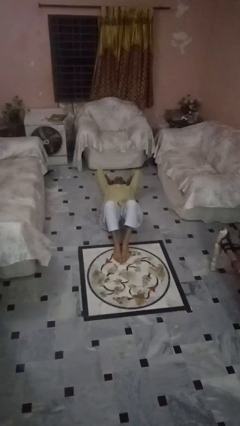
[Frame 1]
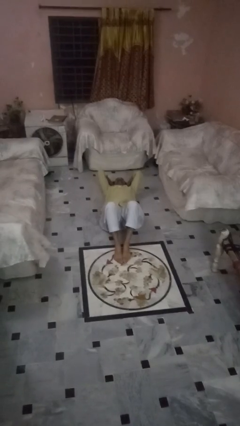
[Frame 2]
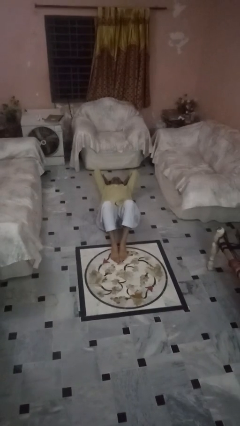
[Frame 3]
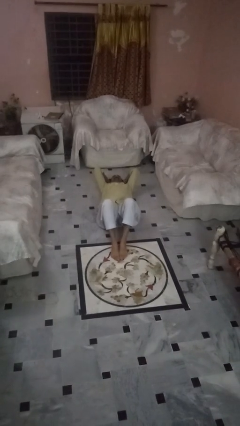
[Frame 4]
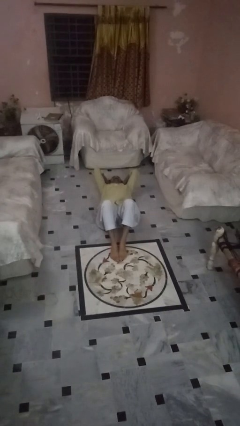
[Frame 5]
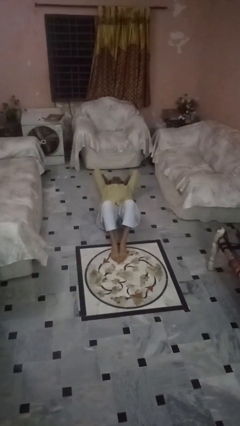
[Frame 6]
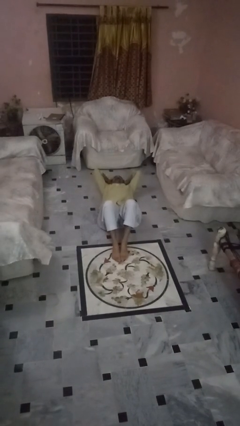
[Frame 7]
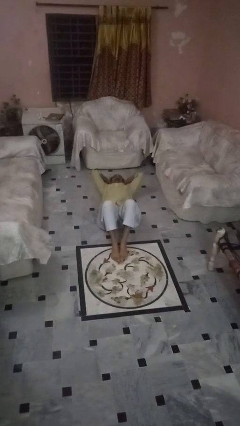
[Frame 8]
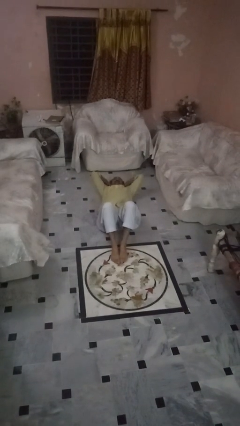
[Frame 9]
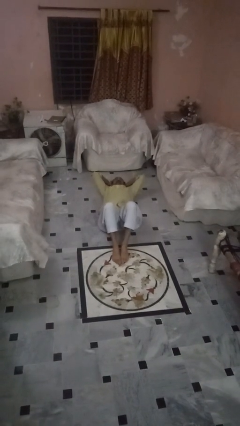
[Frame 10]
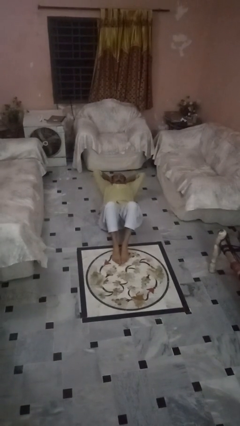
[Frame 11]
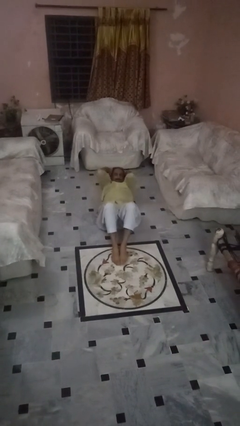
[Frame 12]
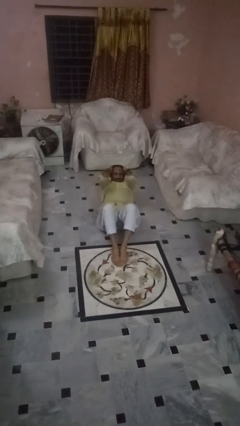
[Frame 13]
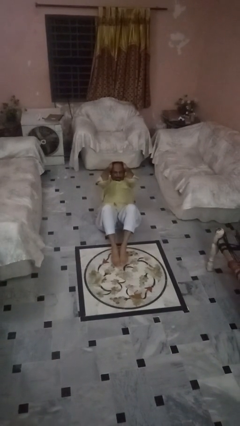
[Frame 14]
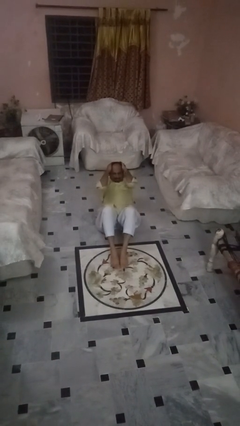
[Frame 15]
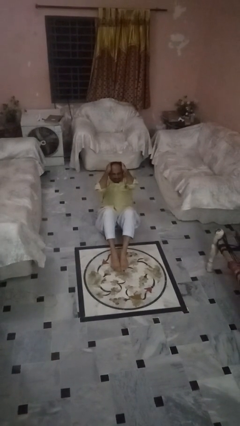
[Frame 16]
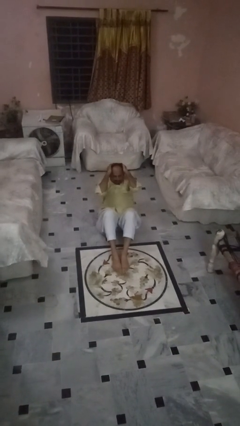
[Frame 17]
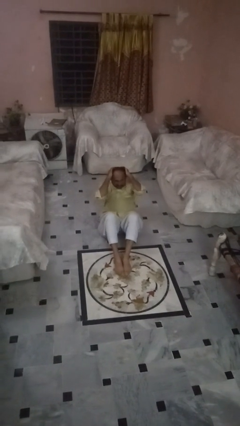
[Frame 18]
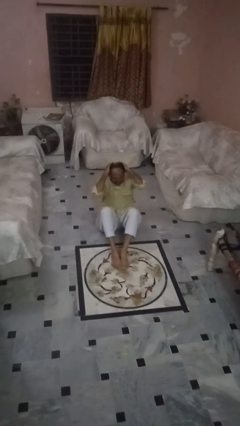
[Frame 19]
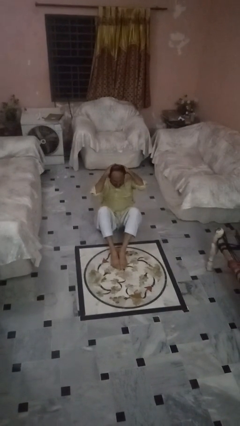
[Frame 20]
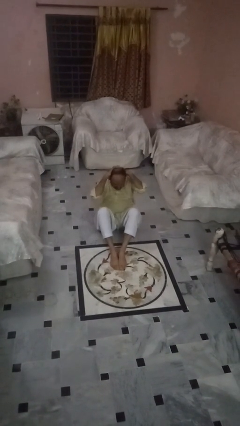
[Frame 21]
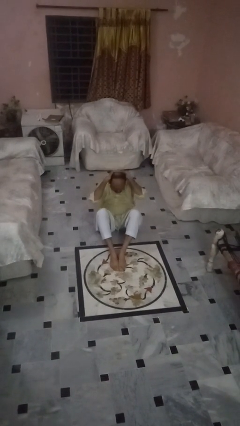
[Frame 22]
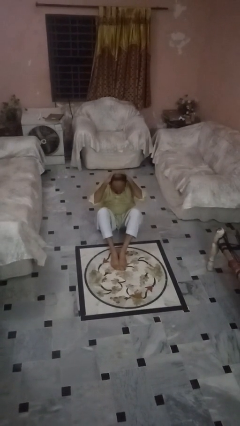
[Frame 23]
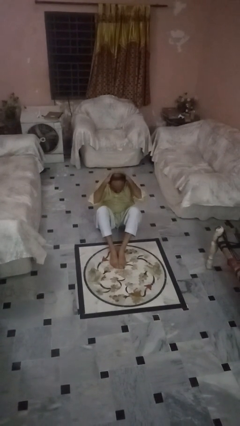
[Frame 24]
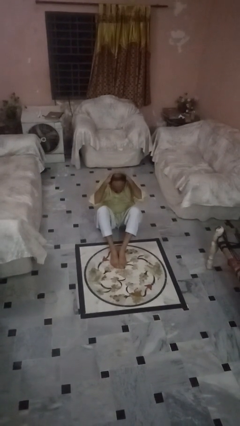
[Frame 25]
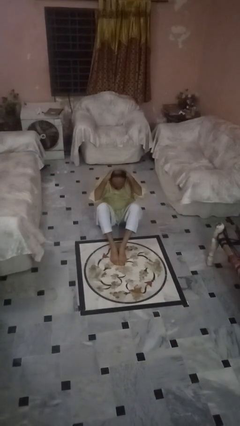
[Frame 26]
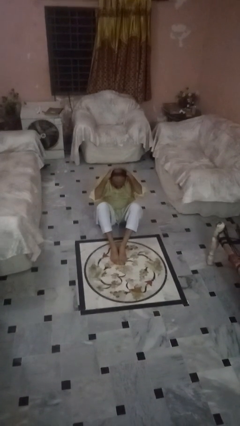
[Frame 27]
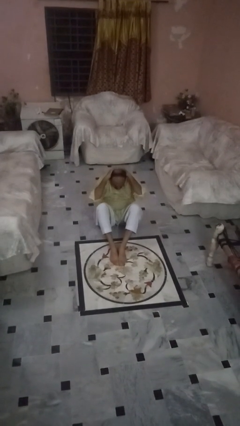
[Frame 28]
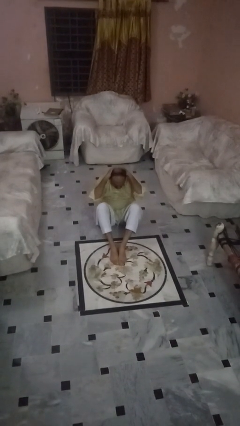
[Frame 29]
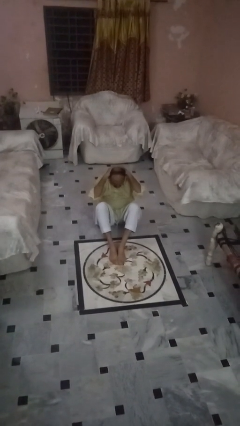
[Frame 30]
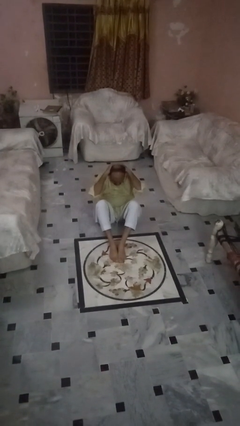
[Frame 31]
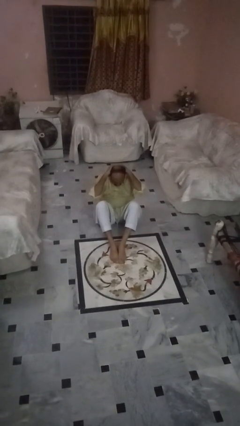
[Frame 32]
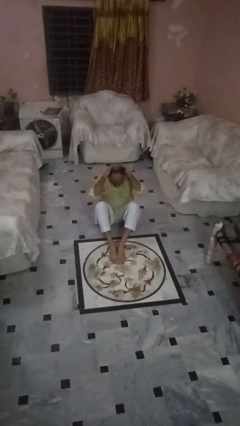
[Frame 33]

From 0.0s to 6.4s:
person exercises with situp

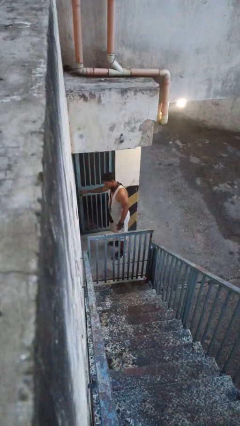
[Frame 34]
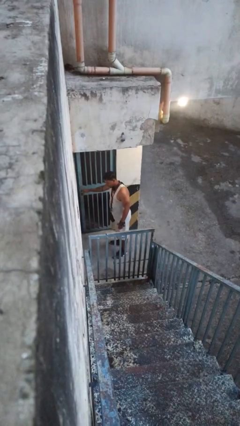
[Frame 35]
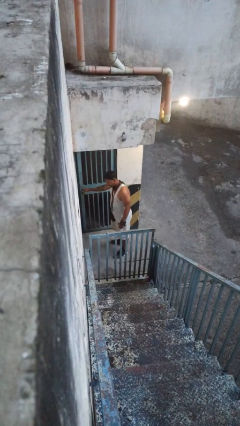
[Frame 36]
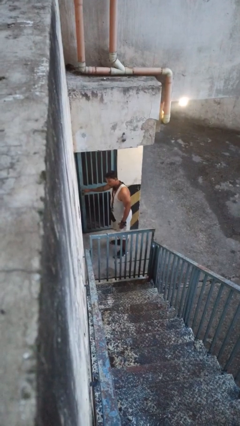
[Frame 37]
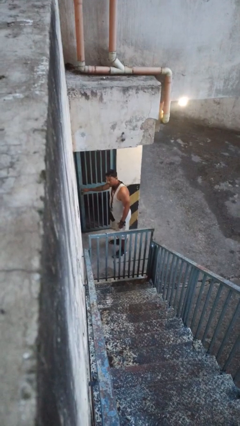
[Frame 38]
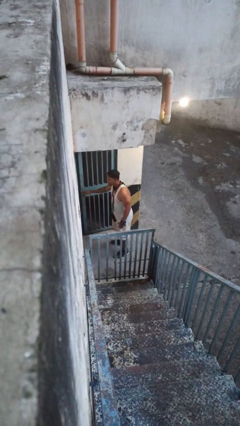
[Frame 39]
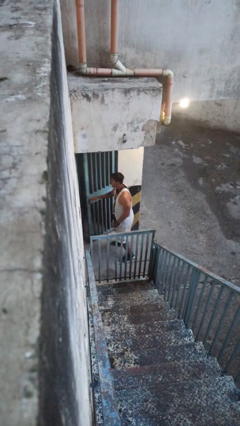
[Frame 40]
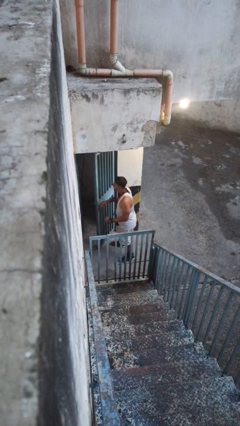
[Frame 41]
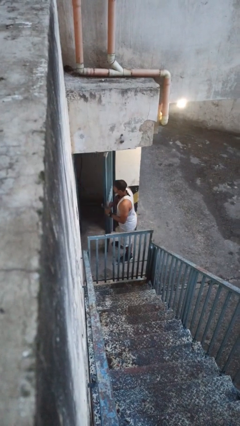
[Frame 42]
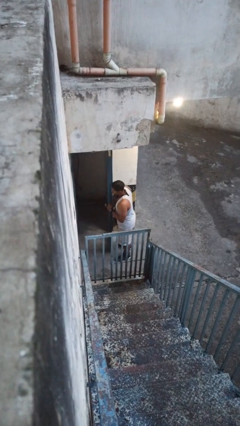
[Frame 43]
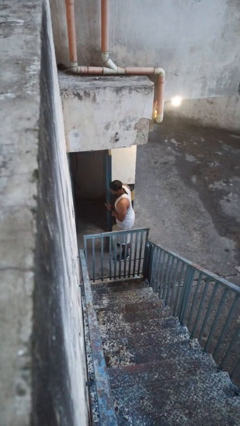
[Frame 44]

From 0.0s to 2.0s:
person opens facility door

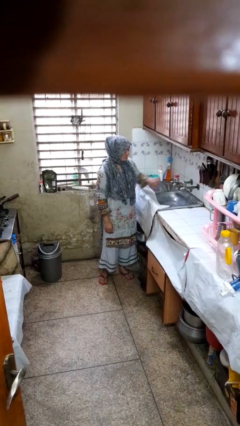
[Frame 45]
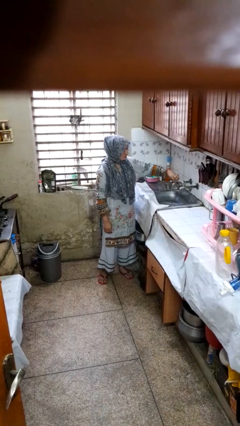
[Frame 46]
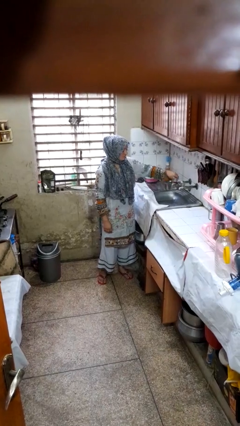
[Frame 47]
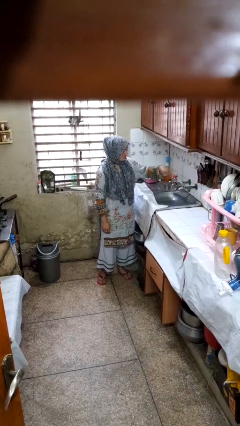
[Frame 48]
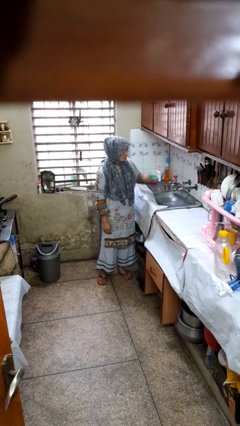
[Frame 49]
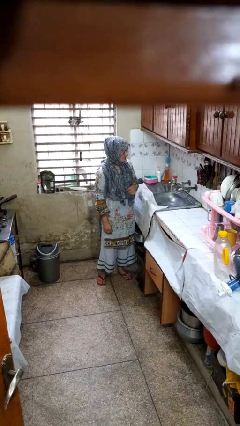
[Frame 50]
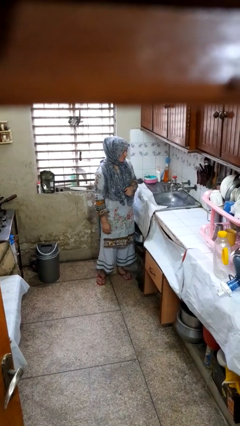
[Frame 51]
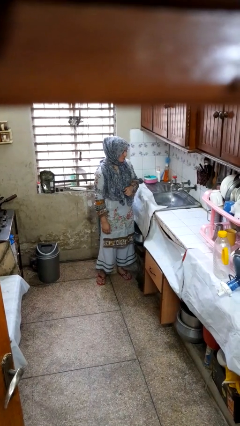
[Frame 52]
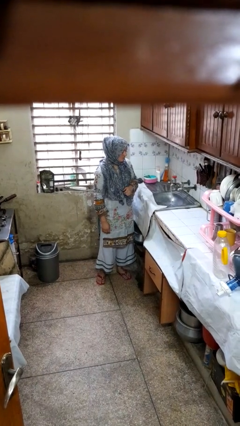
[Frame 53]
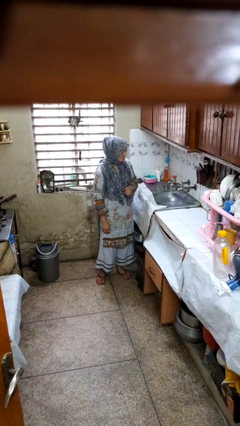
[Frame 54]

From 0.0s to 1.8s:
person turns on faucet

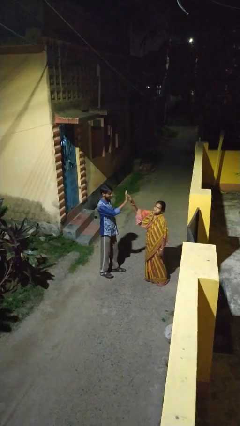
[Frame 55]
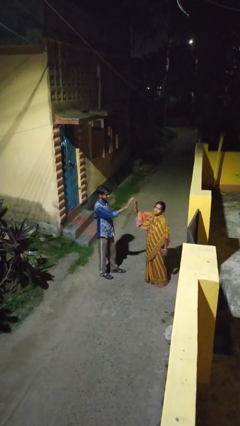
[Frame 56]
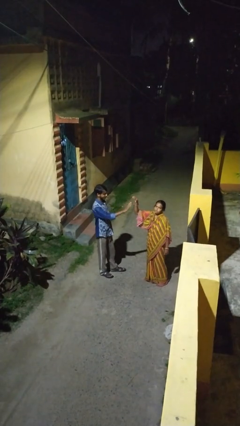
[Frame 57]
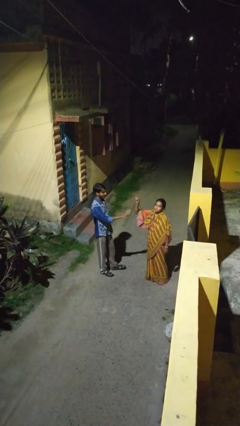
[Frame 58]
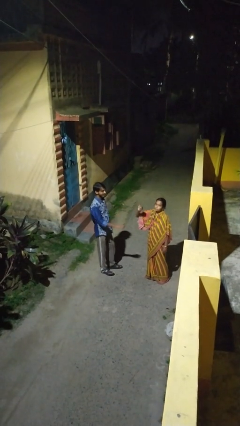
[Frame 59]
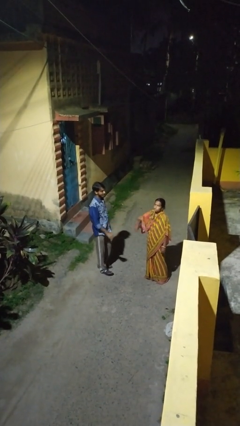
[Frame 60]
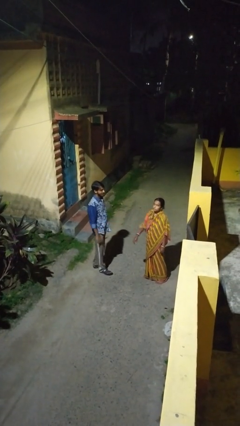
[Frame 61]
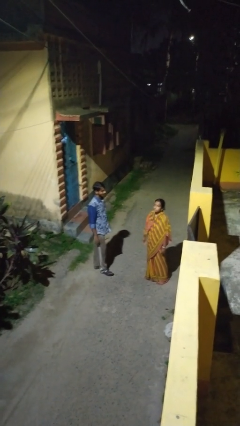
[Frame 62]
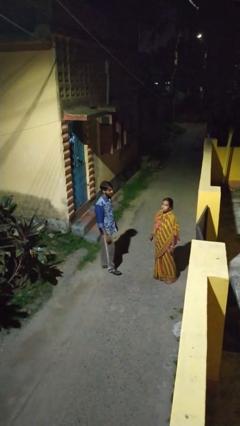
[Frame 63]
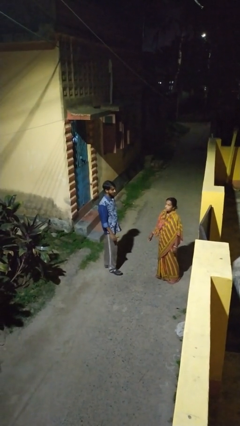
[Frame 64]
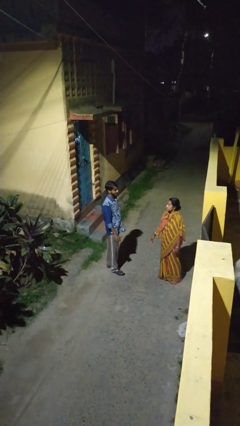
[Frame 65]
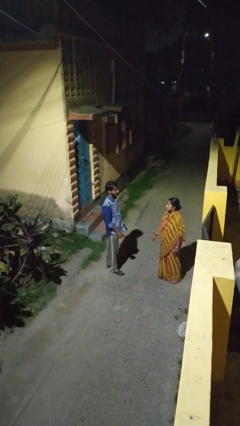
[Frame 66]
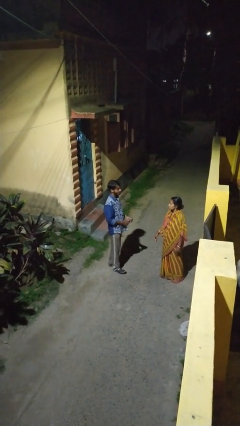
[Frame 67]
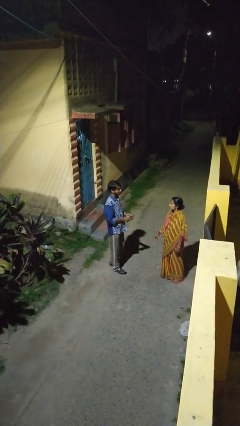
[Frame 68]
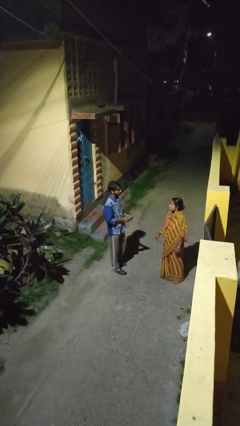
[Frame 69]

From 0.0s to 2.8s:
person highfives hand

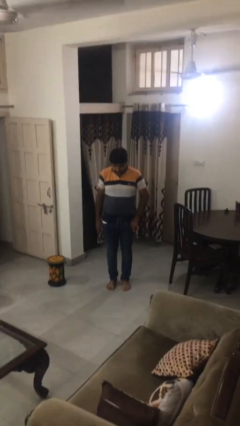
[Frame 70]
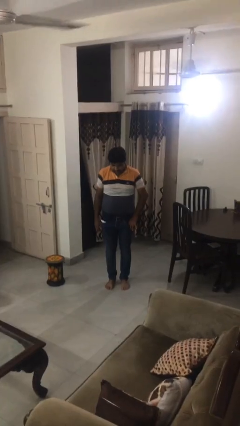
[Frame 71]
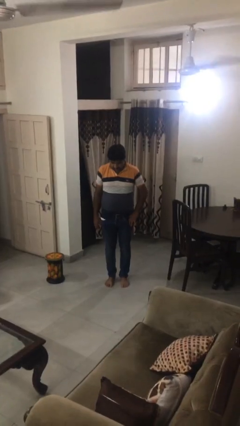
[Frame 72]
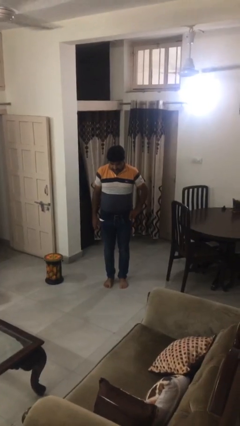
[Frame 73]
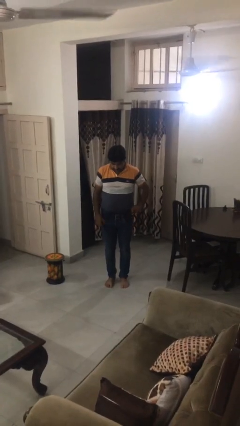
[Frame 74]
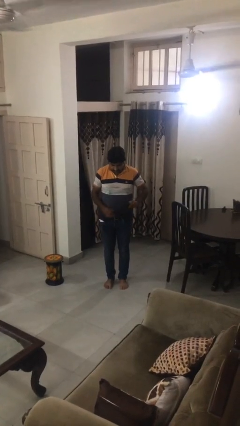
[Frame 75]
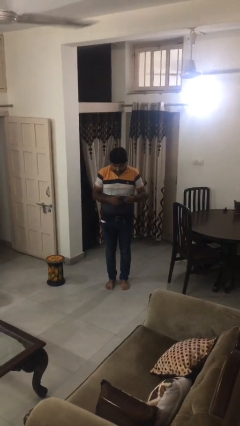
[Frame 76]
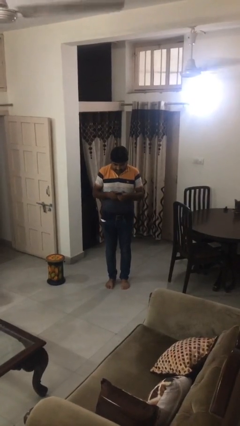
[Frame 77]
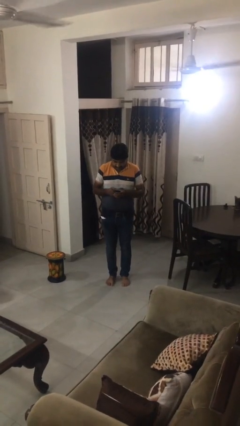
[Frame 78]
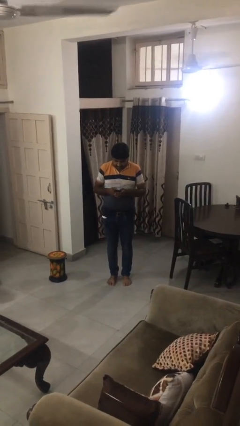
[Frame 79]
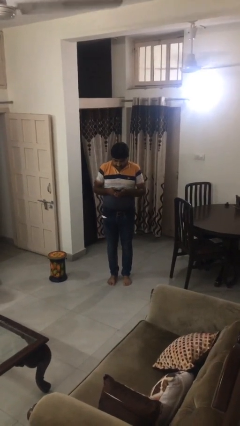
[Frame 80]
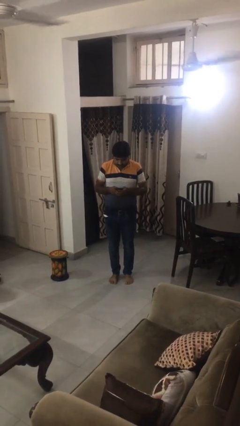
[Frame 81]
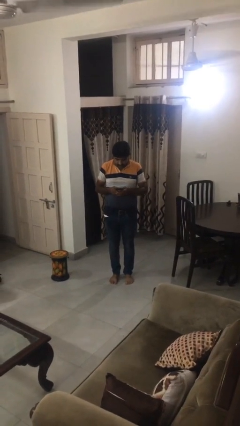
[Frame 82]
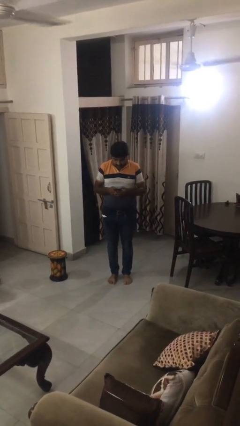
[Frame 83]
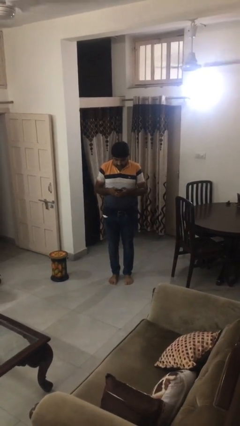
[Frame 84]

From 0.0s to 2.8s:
person takes phone from pocket

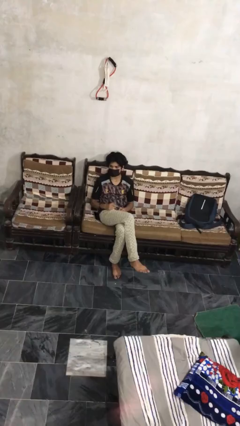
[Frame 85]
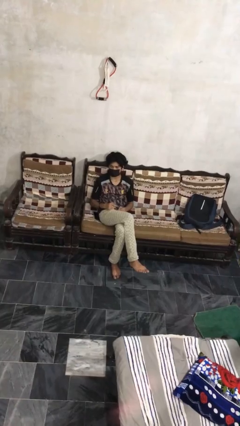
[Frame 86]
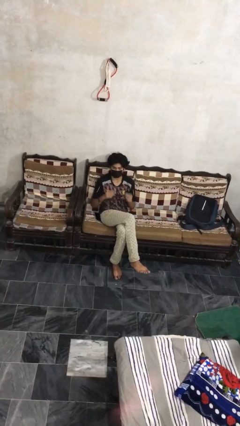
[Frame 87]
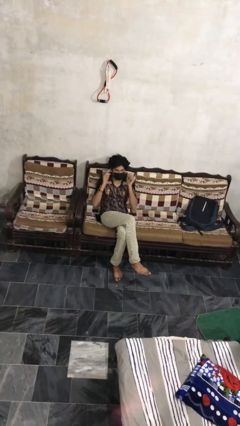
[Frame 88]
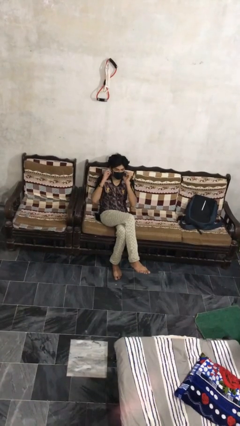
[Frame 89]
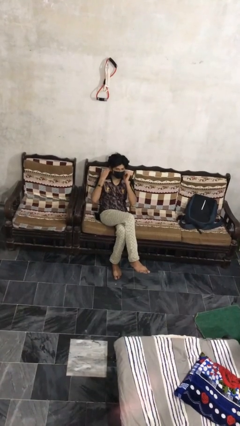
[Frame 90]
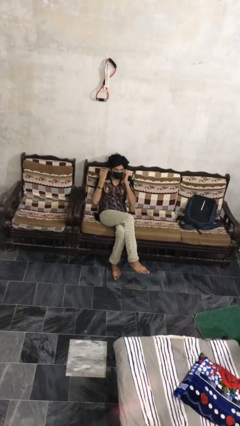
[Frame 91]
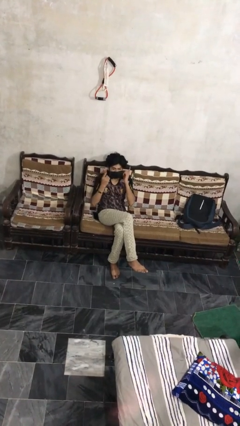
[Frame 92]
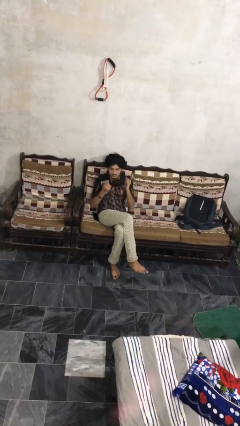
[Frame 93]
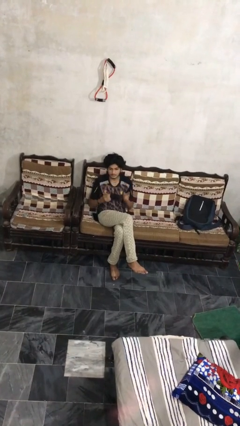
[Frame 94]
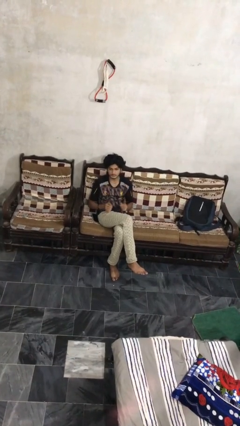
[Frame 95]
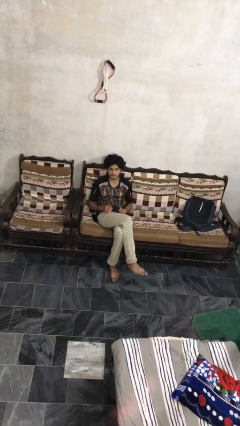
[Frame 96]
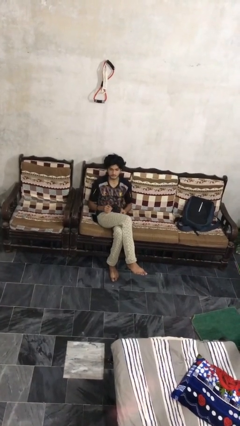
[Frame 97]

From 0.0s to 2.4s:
person takes off facemask
